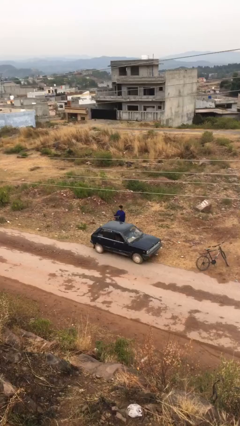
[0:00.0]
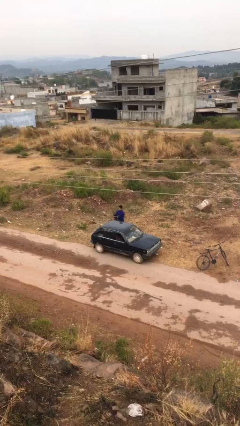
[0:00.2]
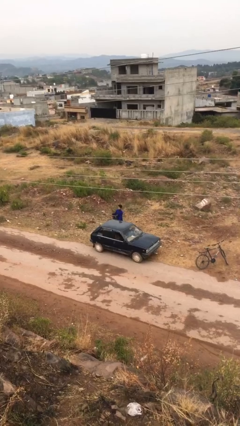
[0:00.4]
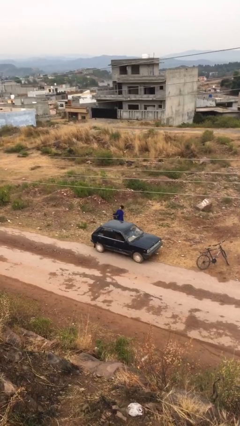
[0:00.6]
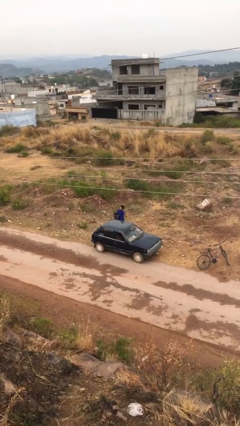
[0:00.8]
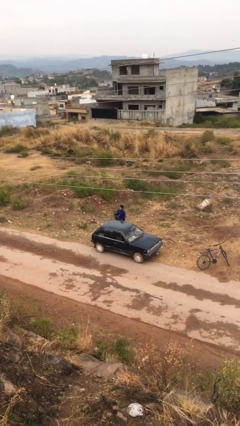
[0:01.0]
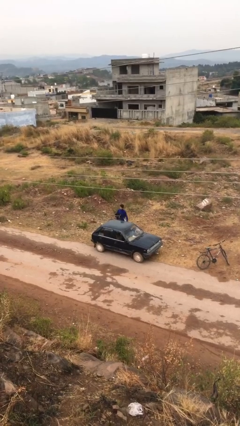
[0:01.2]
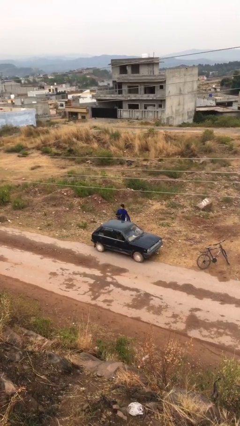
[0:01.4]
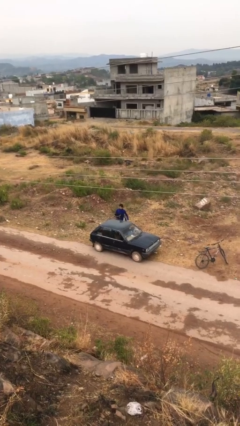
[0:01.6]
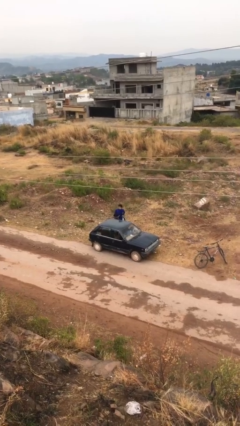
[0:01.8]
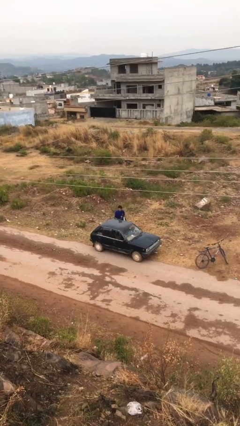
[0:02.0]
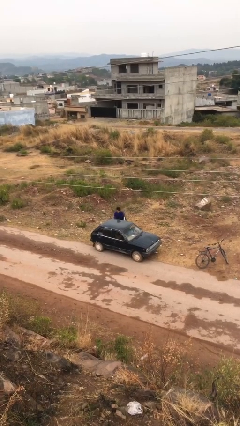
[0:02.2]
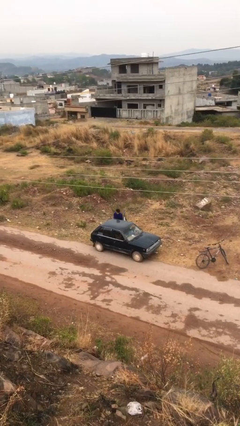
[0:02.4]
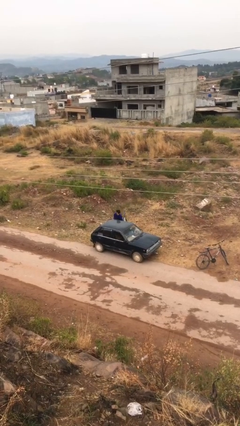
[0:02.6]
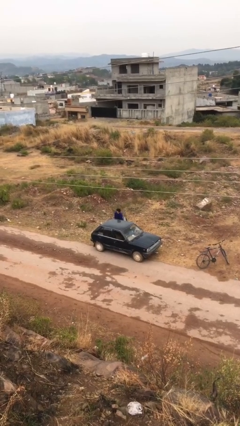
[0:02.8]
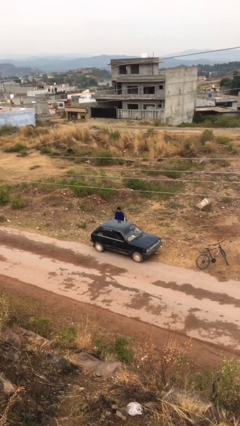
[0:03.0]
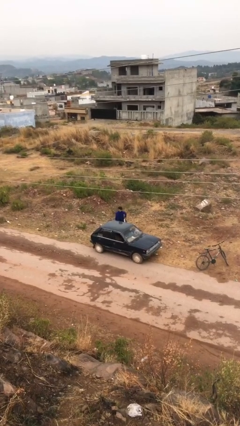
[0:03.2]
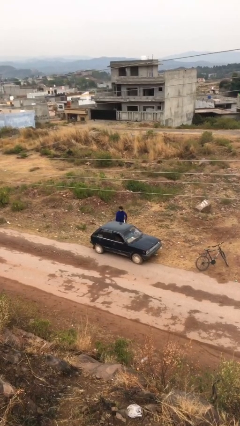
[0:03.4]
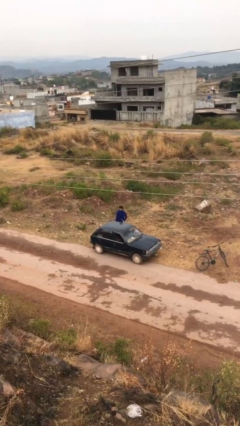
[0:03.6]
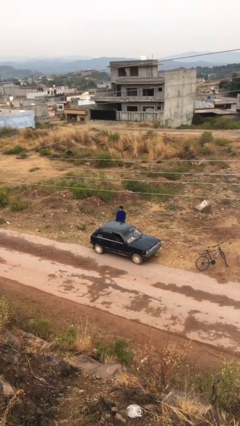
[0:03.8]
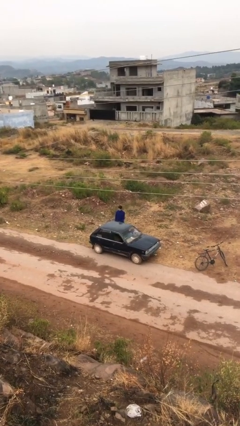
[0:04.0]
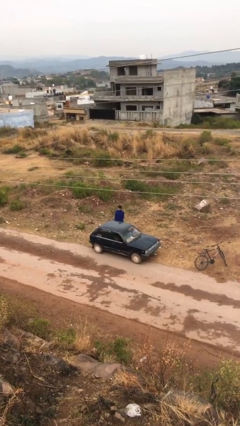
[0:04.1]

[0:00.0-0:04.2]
person loads car

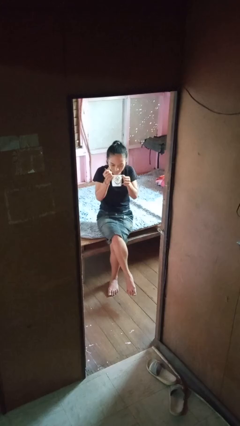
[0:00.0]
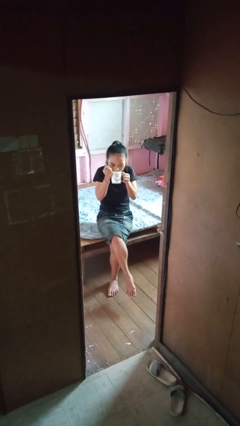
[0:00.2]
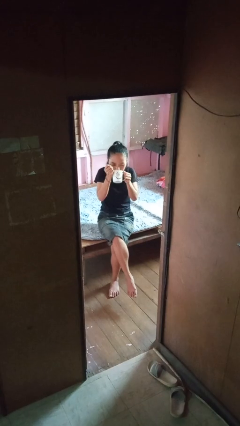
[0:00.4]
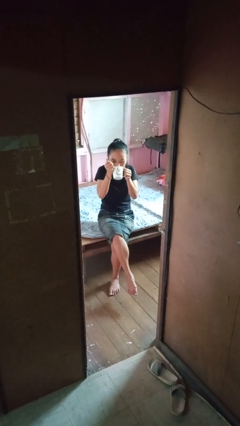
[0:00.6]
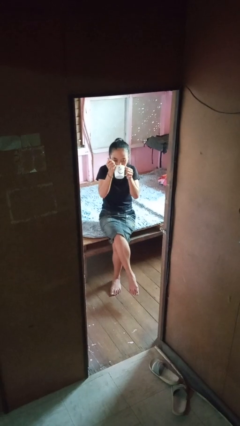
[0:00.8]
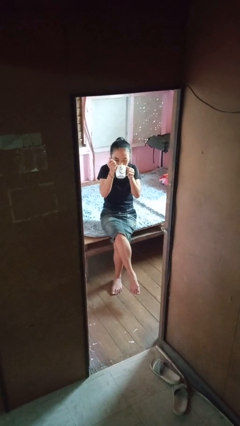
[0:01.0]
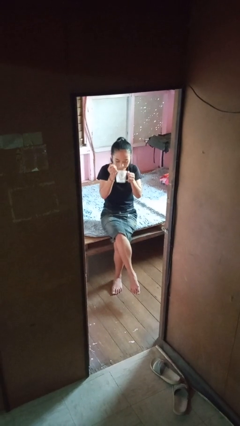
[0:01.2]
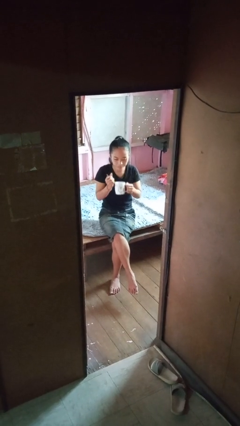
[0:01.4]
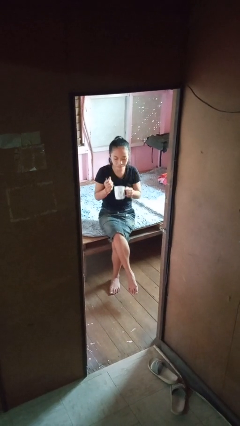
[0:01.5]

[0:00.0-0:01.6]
person drinks from mug

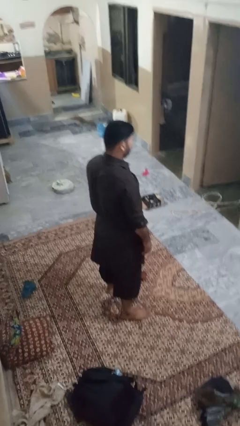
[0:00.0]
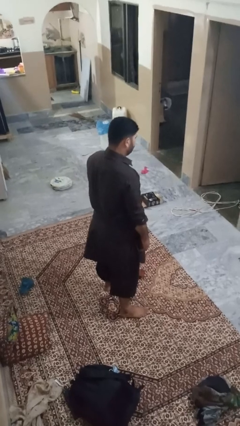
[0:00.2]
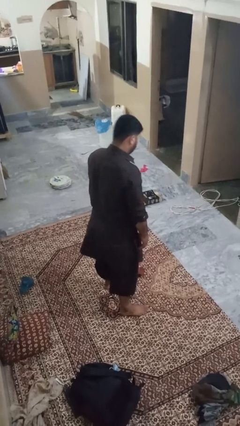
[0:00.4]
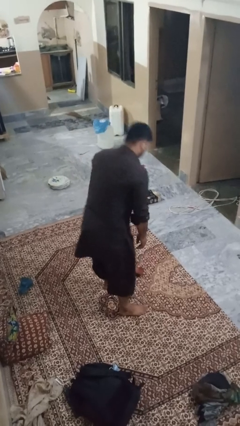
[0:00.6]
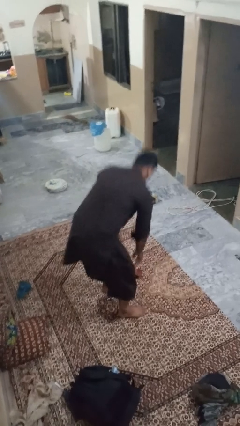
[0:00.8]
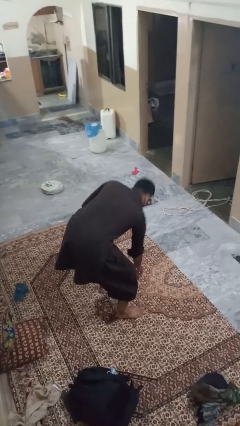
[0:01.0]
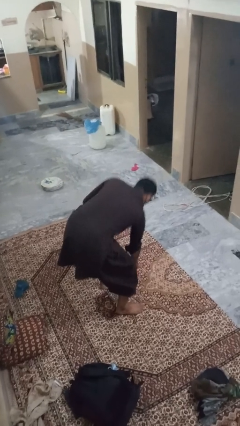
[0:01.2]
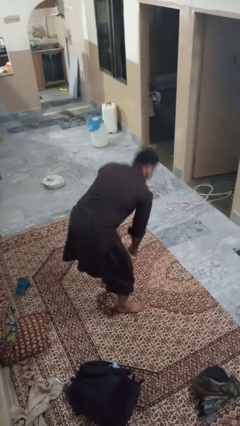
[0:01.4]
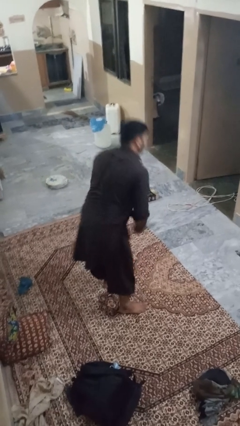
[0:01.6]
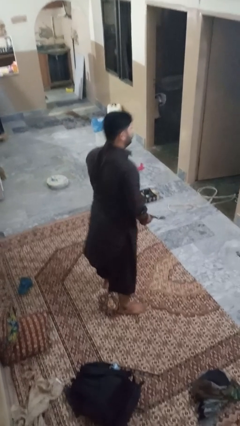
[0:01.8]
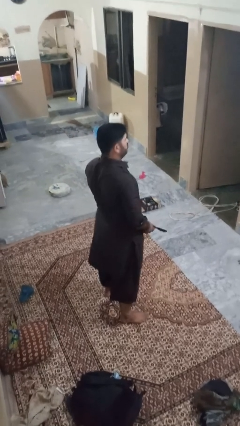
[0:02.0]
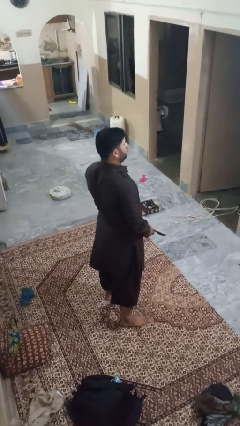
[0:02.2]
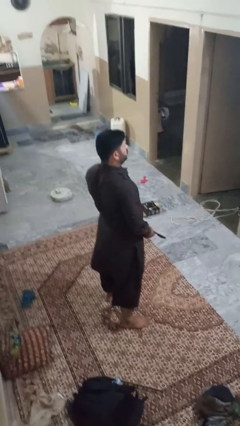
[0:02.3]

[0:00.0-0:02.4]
person picks up object from floor

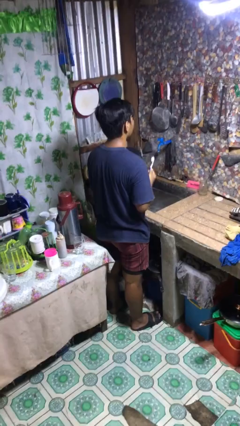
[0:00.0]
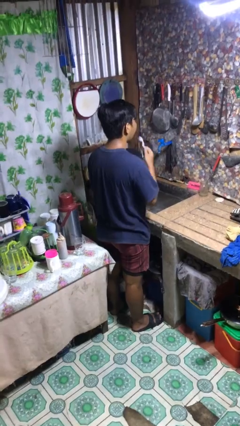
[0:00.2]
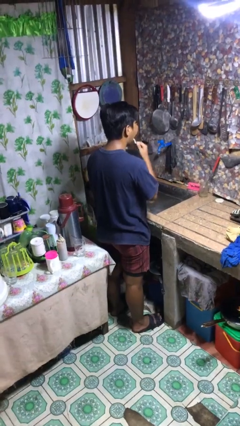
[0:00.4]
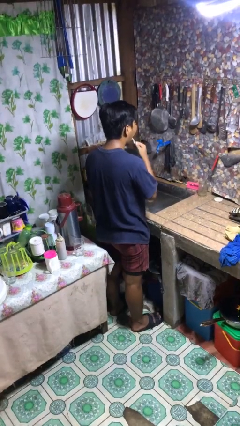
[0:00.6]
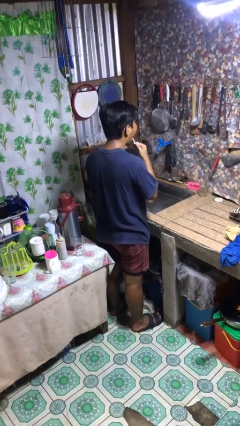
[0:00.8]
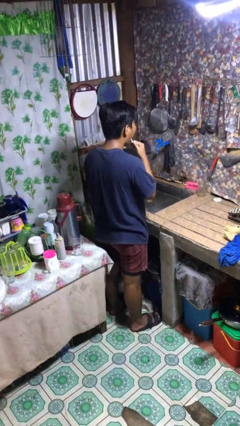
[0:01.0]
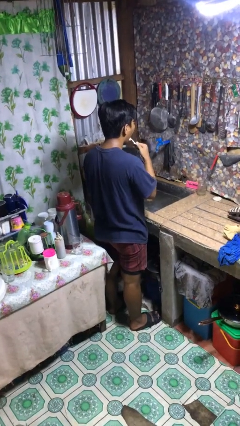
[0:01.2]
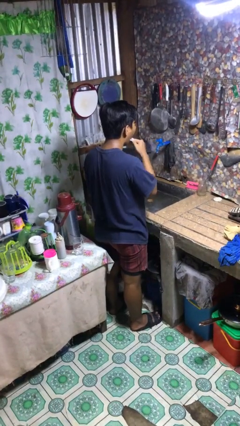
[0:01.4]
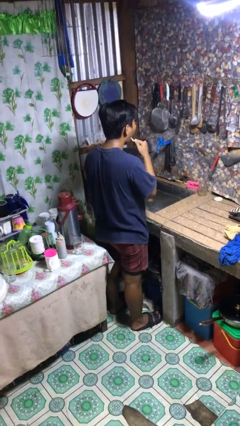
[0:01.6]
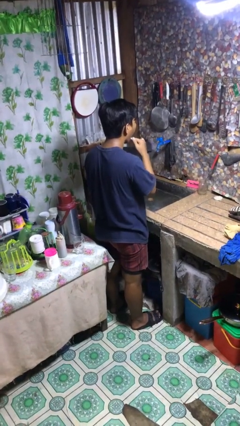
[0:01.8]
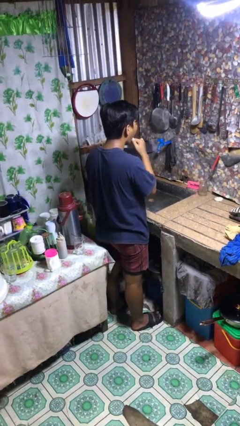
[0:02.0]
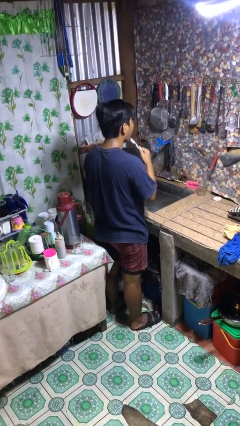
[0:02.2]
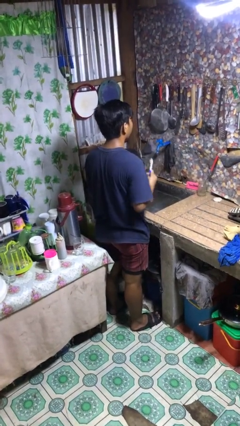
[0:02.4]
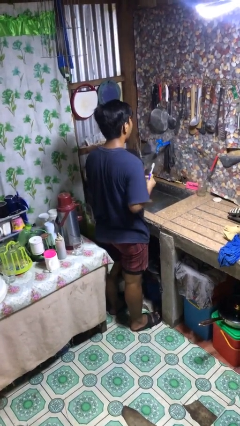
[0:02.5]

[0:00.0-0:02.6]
person brushes teeth

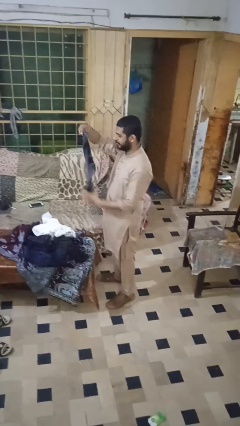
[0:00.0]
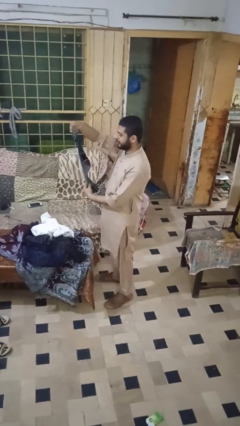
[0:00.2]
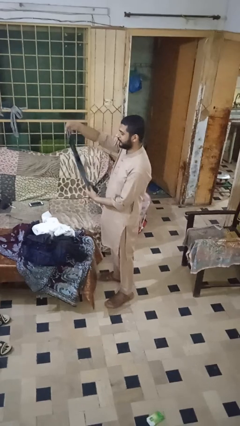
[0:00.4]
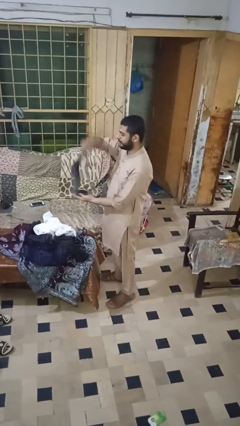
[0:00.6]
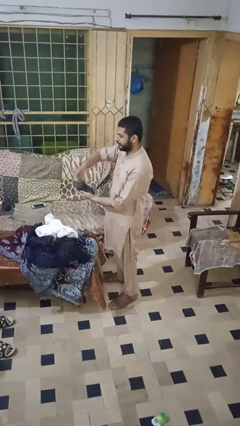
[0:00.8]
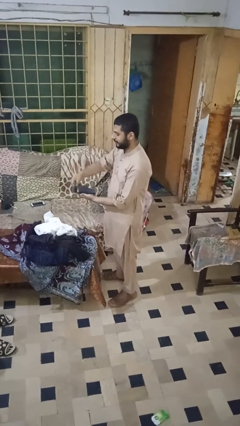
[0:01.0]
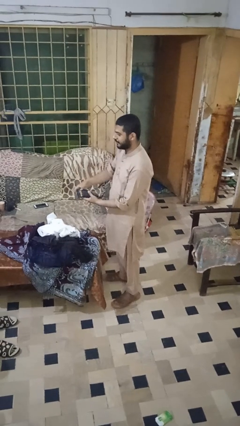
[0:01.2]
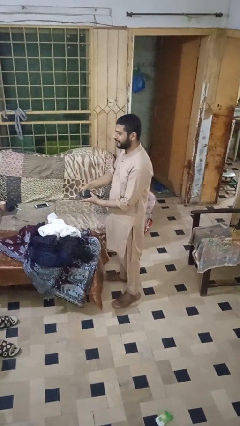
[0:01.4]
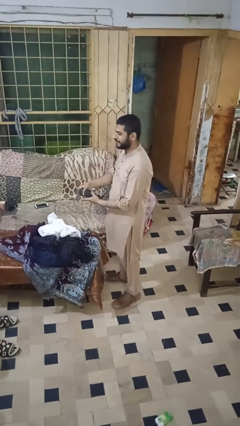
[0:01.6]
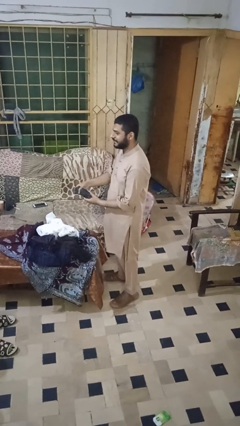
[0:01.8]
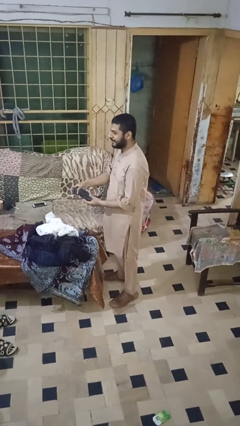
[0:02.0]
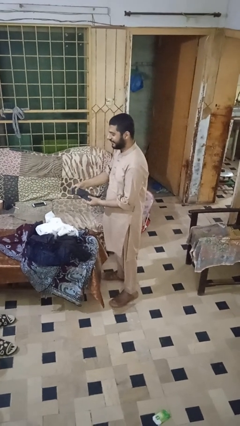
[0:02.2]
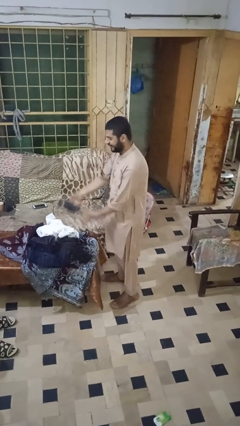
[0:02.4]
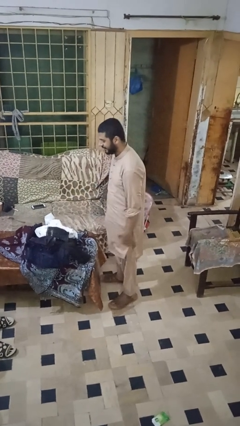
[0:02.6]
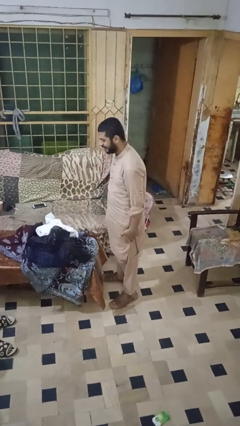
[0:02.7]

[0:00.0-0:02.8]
person folds socks

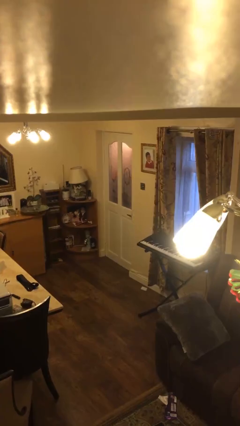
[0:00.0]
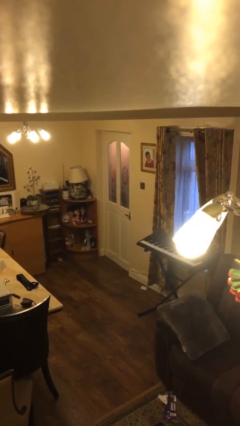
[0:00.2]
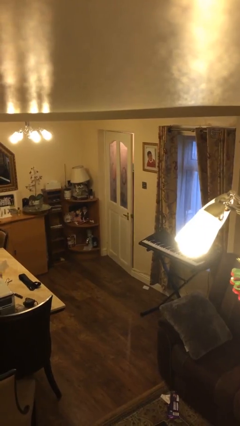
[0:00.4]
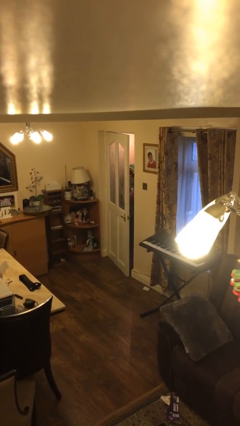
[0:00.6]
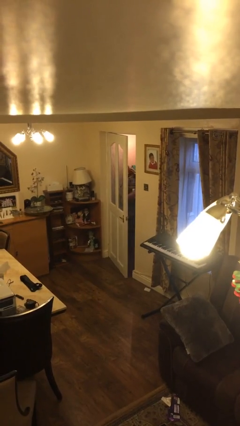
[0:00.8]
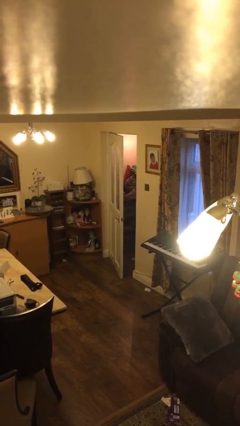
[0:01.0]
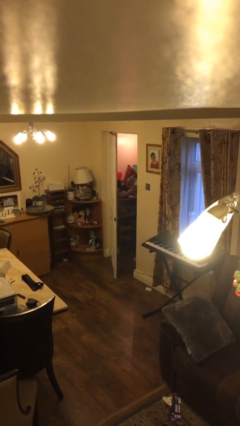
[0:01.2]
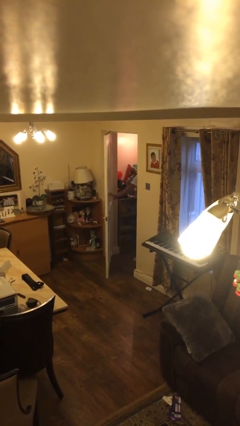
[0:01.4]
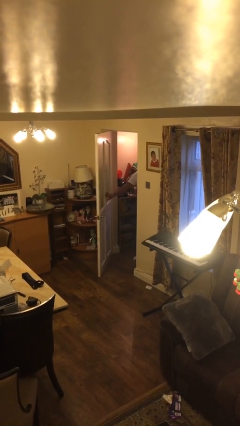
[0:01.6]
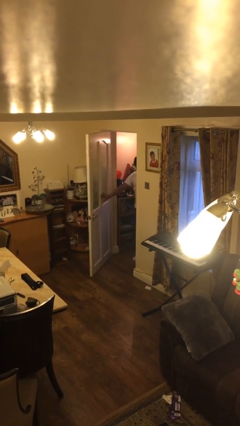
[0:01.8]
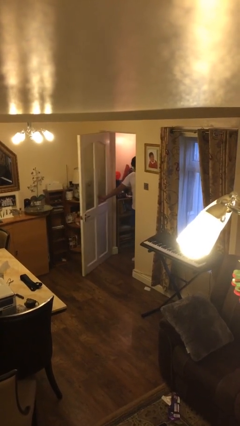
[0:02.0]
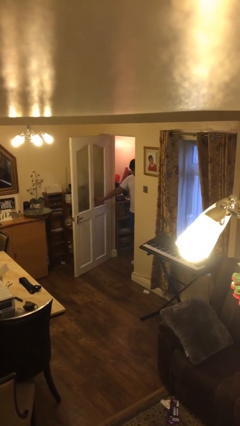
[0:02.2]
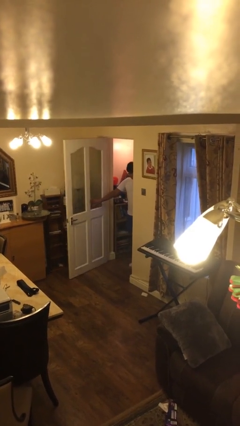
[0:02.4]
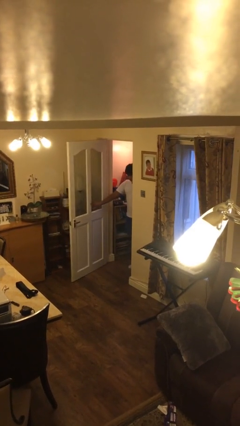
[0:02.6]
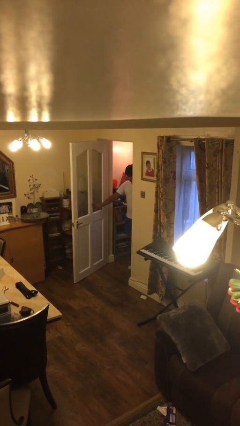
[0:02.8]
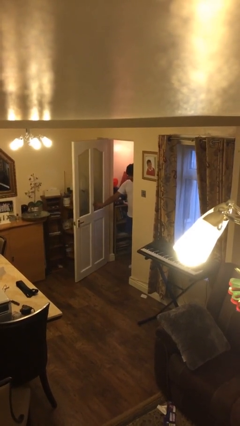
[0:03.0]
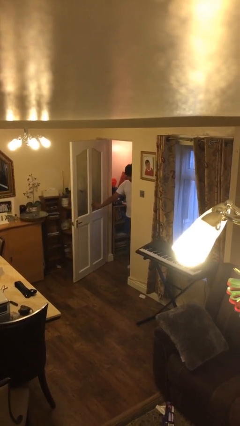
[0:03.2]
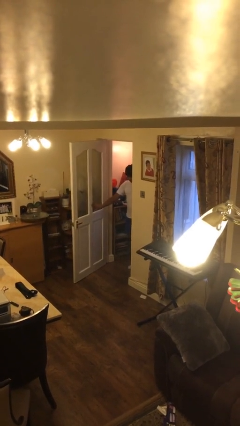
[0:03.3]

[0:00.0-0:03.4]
person opens facility door

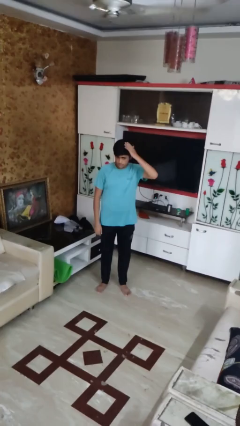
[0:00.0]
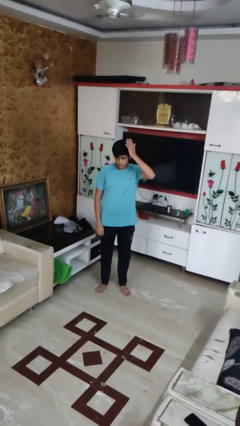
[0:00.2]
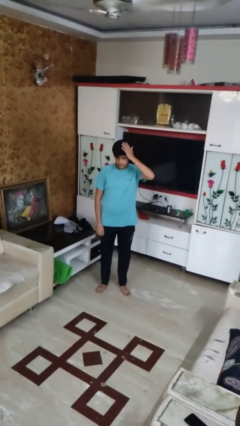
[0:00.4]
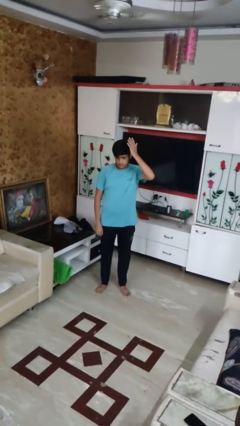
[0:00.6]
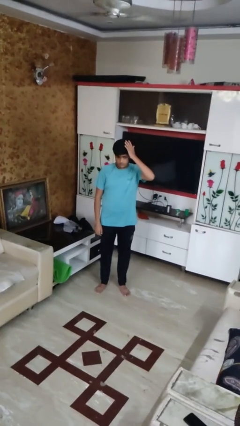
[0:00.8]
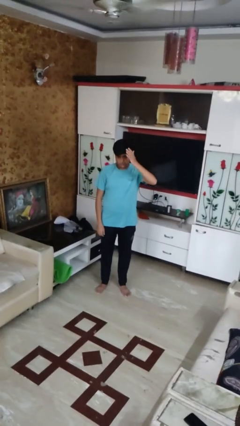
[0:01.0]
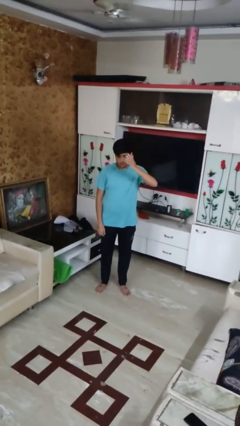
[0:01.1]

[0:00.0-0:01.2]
person pats head
